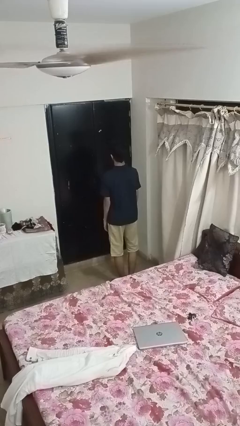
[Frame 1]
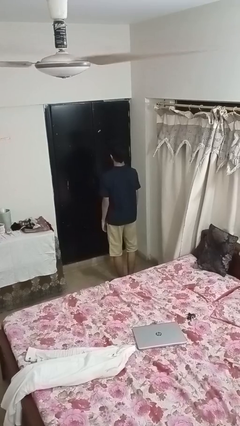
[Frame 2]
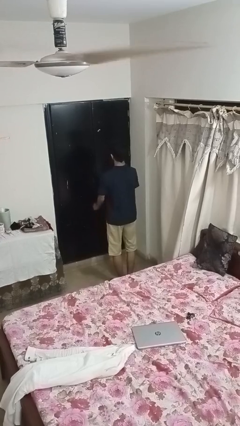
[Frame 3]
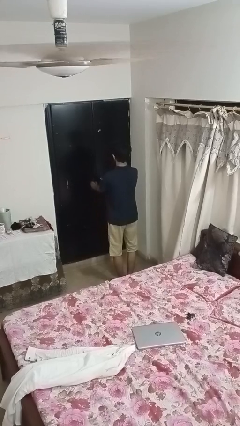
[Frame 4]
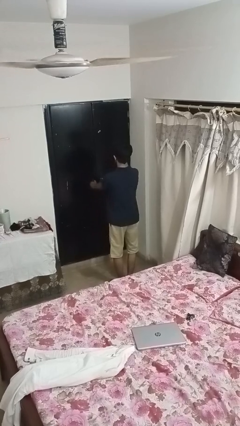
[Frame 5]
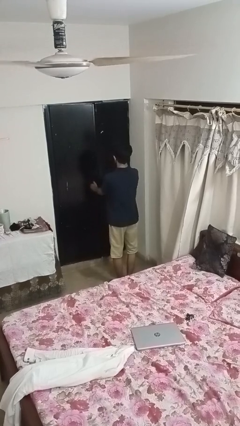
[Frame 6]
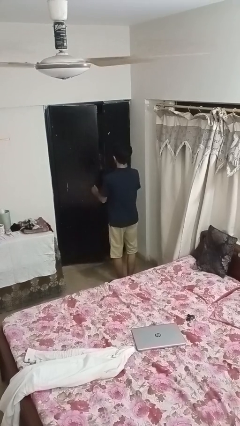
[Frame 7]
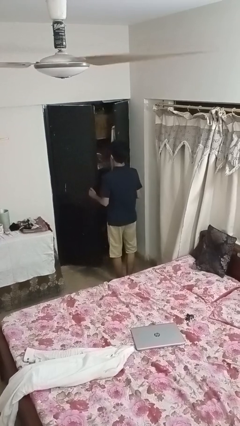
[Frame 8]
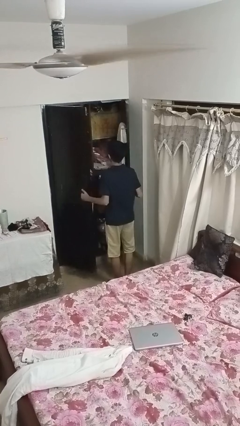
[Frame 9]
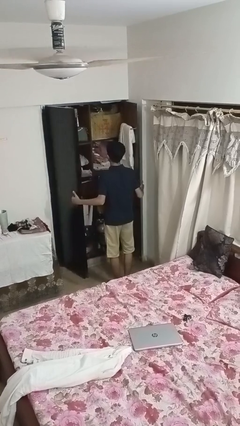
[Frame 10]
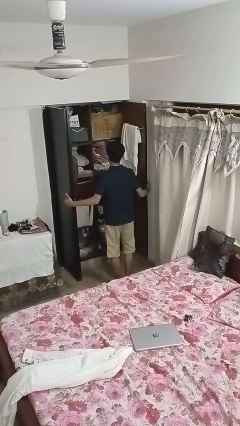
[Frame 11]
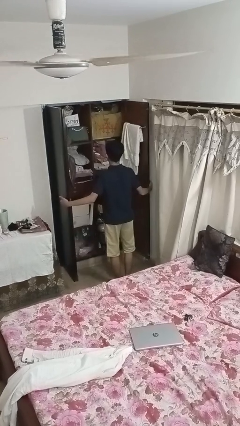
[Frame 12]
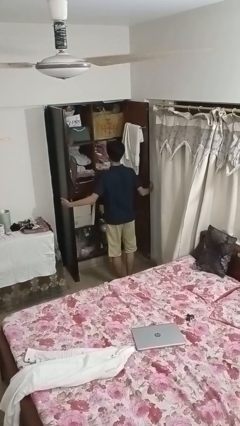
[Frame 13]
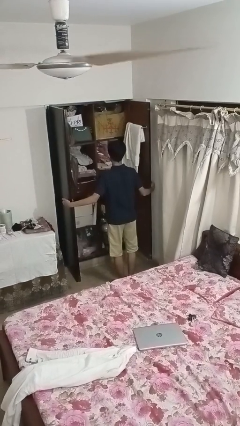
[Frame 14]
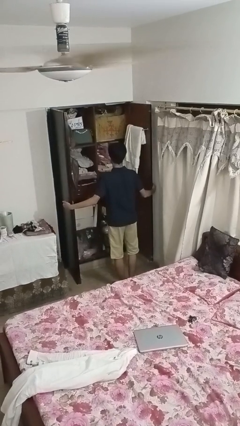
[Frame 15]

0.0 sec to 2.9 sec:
person opens closet door

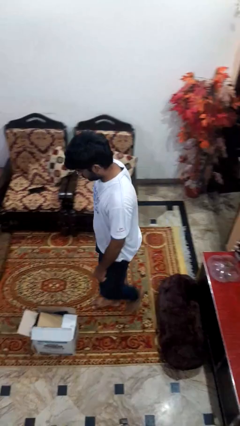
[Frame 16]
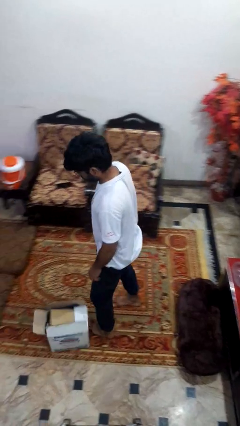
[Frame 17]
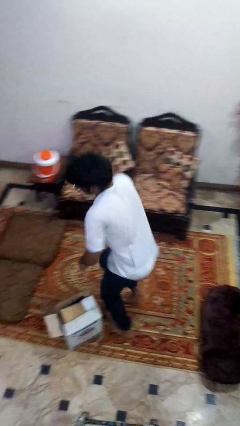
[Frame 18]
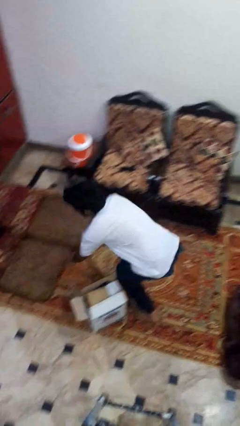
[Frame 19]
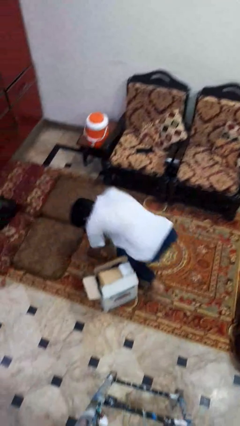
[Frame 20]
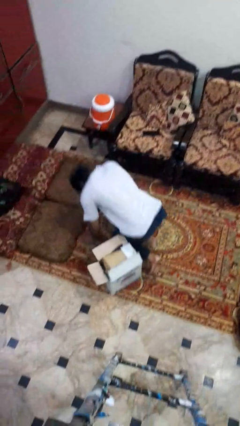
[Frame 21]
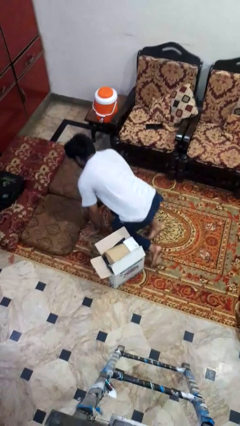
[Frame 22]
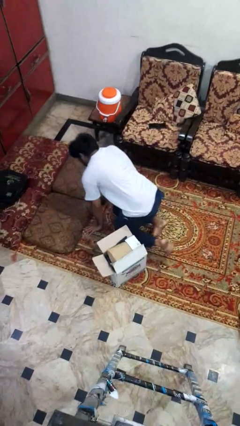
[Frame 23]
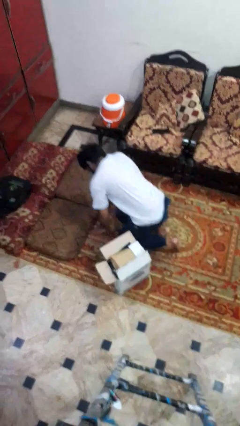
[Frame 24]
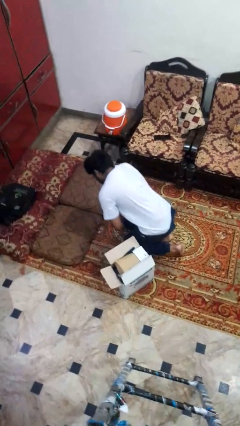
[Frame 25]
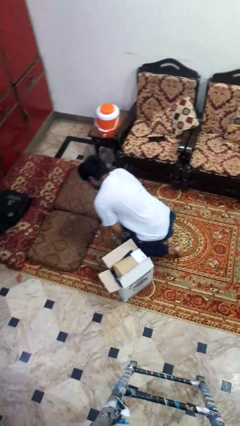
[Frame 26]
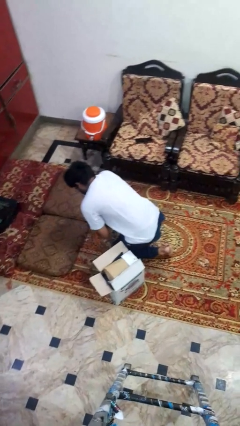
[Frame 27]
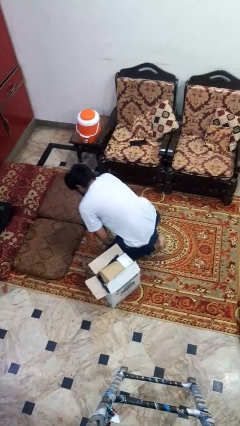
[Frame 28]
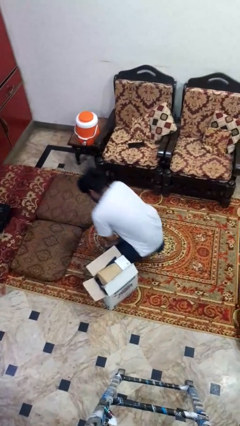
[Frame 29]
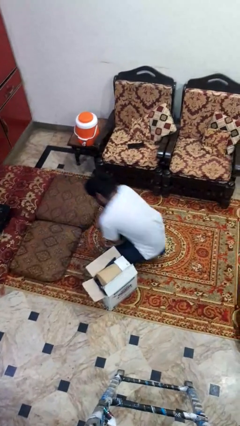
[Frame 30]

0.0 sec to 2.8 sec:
person trips on object on floor

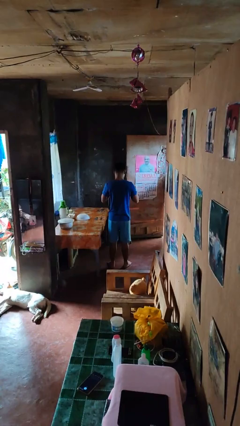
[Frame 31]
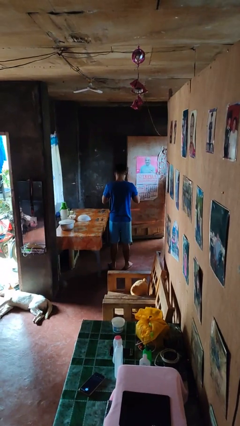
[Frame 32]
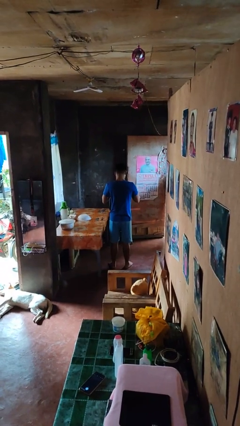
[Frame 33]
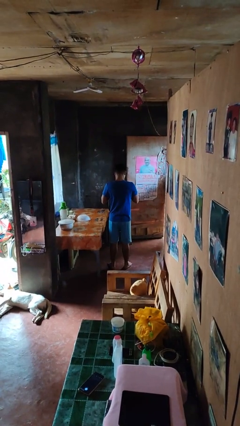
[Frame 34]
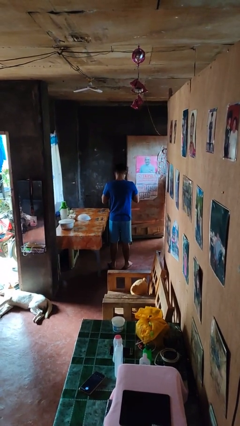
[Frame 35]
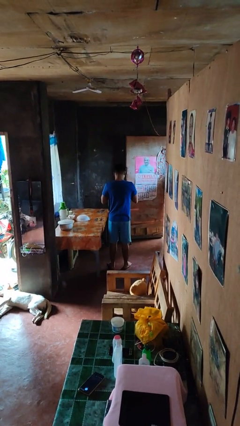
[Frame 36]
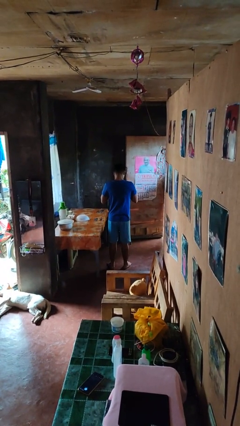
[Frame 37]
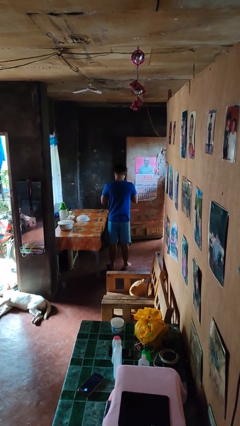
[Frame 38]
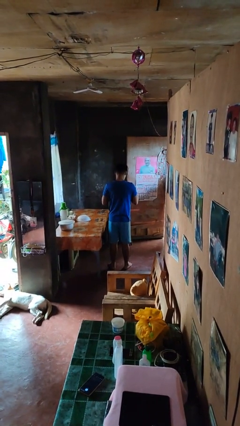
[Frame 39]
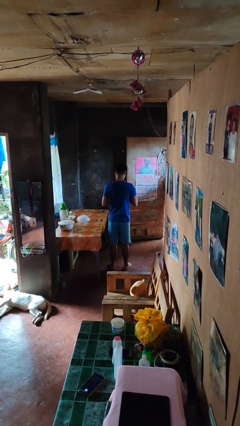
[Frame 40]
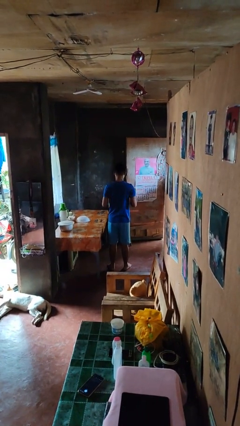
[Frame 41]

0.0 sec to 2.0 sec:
person buttons shirt

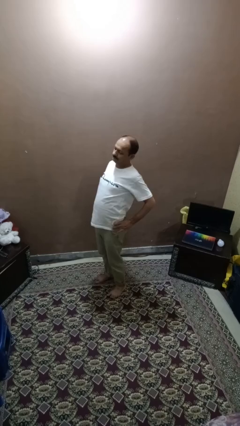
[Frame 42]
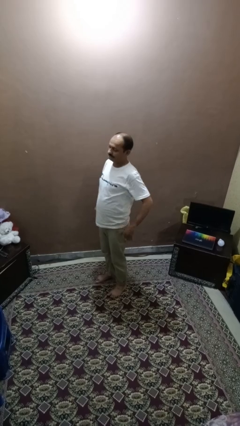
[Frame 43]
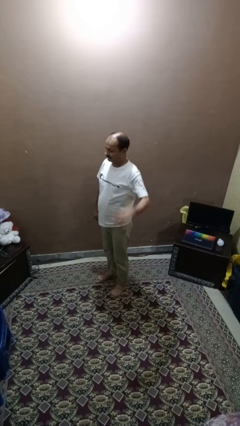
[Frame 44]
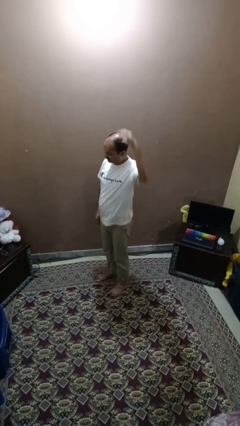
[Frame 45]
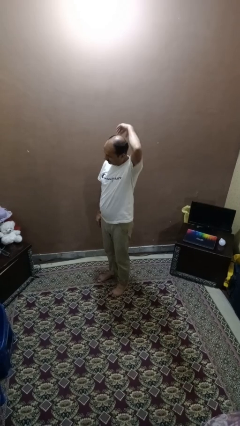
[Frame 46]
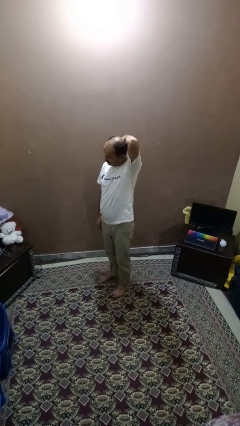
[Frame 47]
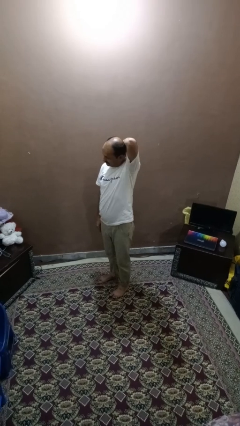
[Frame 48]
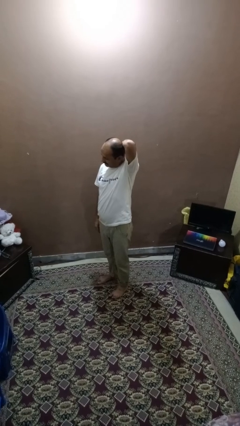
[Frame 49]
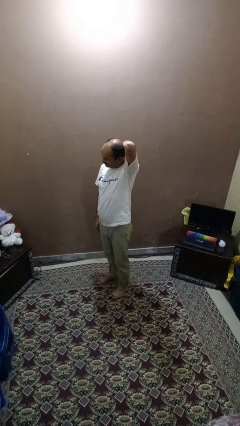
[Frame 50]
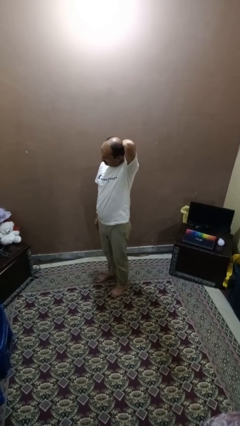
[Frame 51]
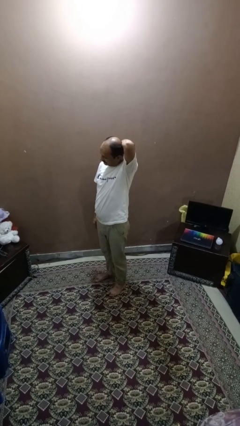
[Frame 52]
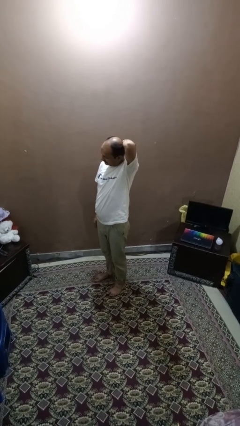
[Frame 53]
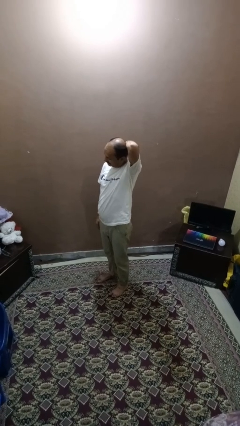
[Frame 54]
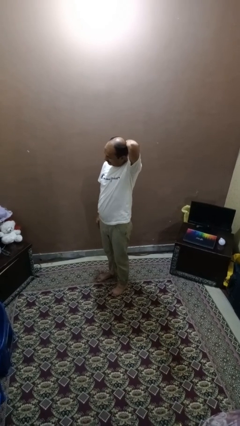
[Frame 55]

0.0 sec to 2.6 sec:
person stretches arms to side

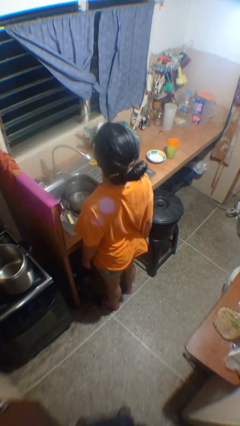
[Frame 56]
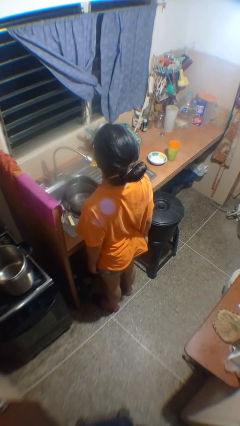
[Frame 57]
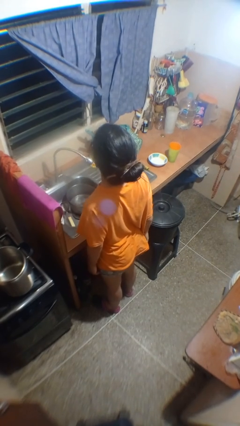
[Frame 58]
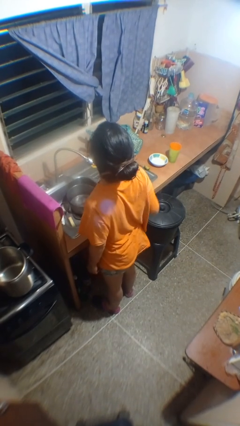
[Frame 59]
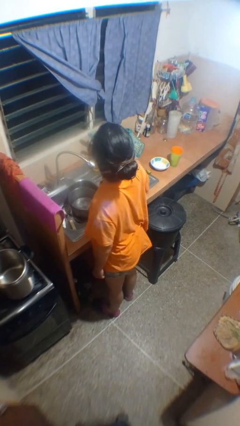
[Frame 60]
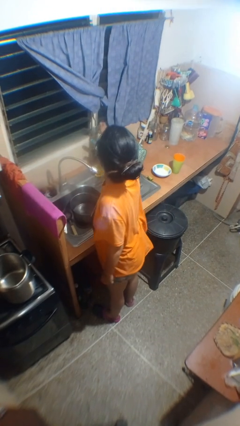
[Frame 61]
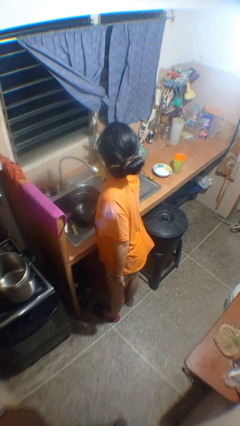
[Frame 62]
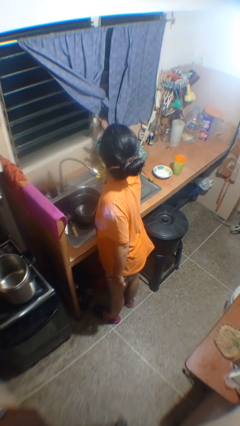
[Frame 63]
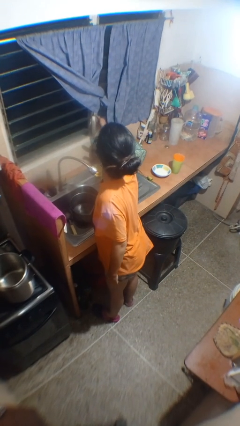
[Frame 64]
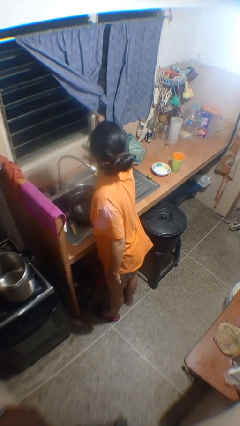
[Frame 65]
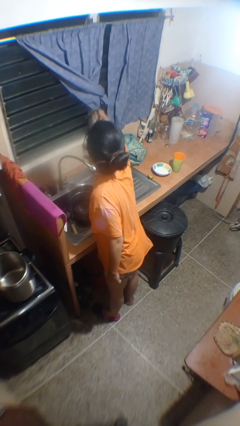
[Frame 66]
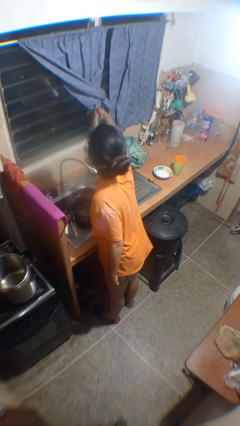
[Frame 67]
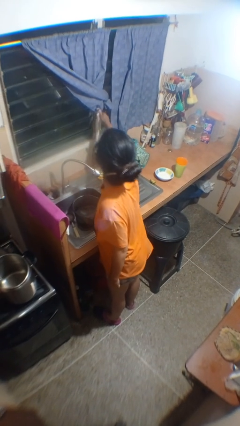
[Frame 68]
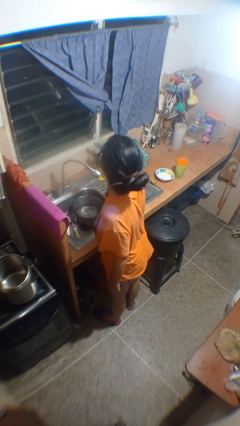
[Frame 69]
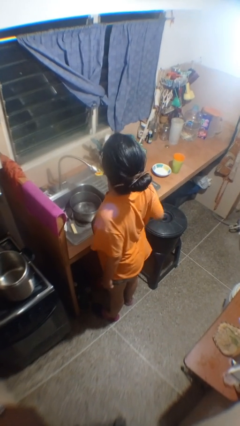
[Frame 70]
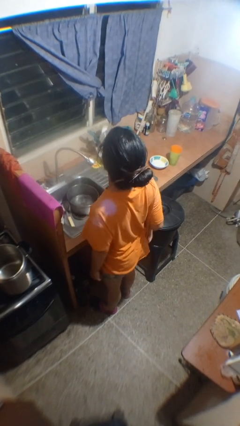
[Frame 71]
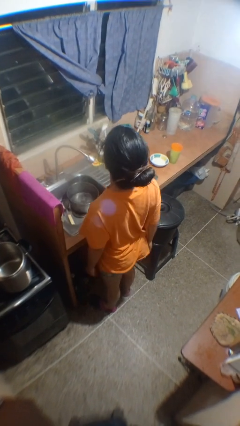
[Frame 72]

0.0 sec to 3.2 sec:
person closes home window

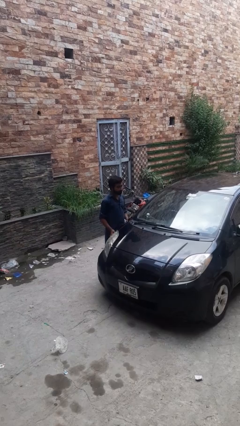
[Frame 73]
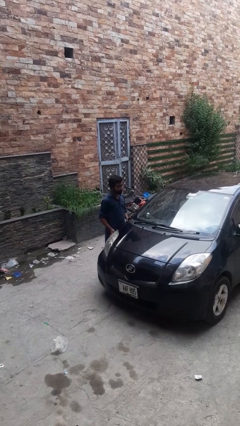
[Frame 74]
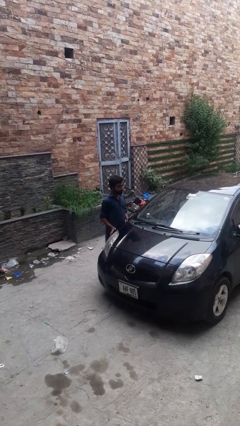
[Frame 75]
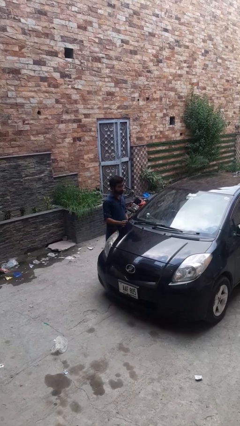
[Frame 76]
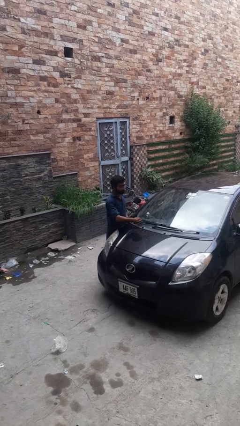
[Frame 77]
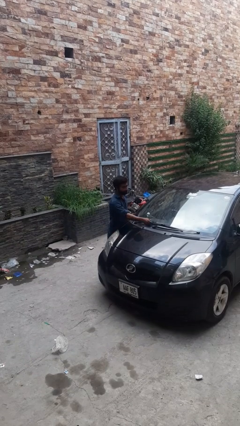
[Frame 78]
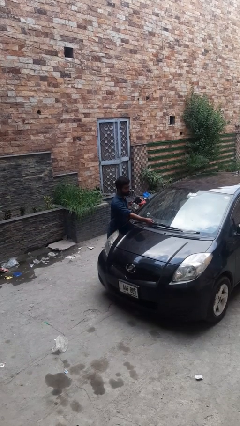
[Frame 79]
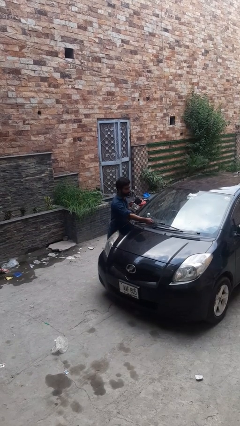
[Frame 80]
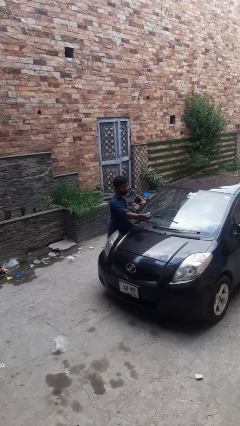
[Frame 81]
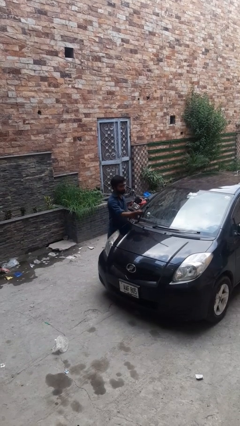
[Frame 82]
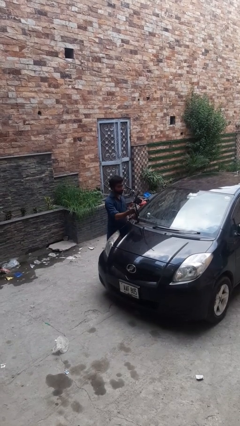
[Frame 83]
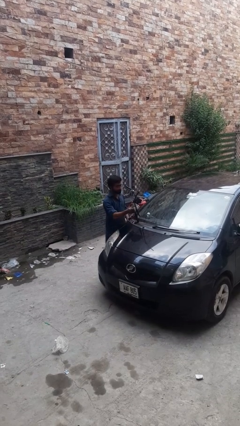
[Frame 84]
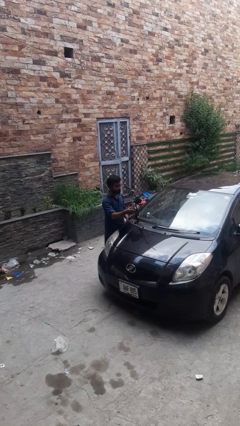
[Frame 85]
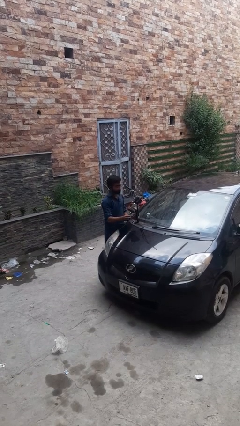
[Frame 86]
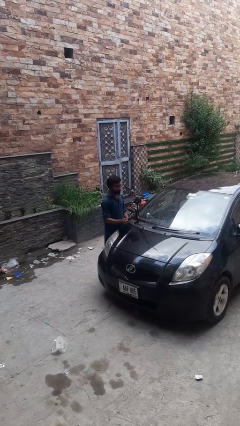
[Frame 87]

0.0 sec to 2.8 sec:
person flips up car wipers

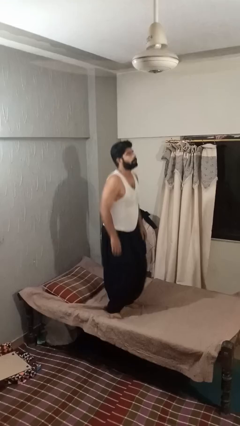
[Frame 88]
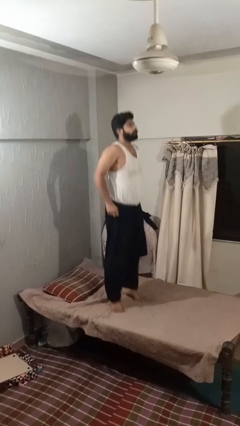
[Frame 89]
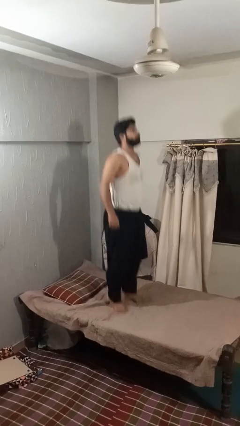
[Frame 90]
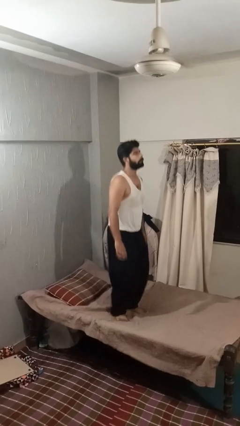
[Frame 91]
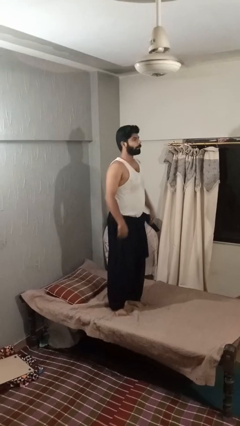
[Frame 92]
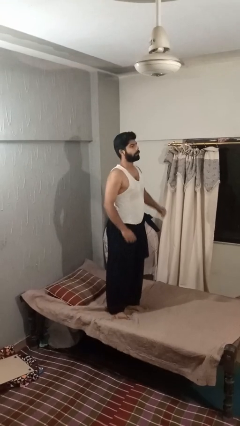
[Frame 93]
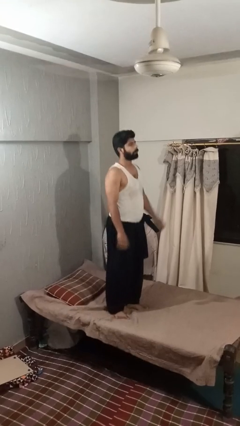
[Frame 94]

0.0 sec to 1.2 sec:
person jumps on bed
